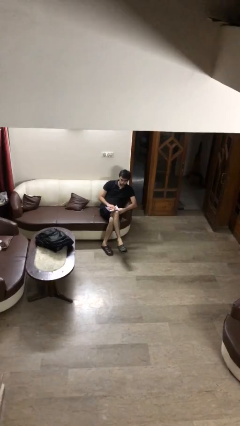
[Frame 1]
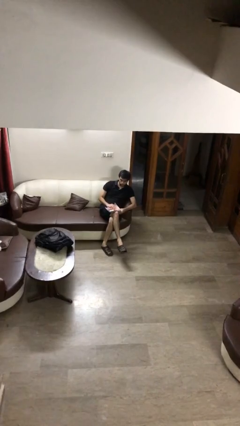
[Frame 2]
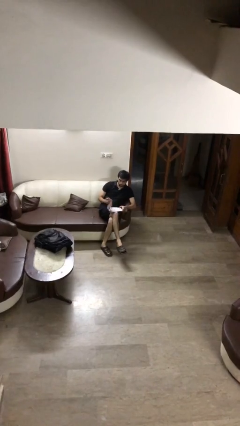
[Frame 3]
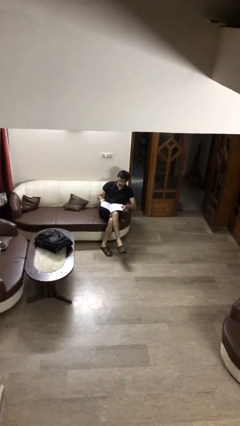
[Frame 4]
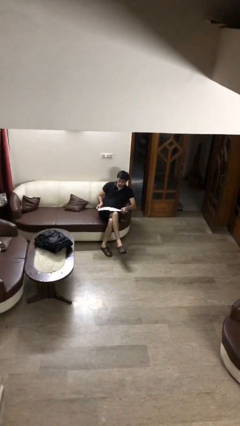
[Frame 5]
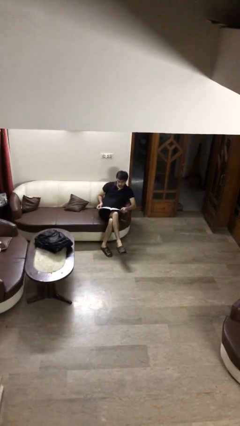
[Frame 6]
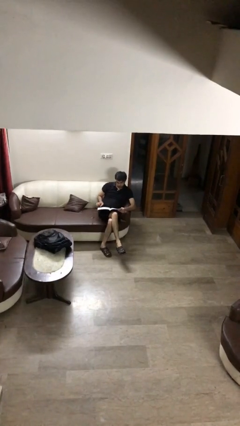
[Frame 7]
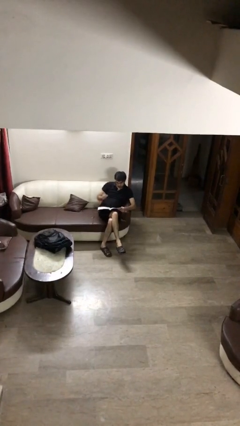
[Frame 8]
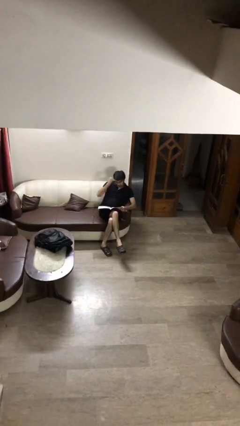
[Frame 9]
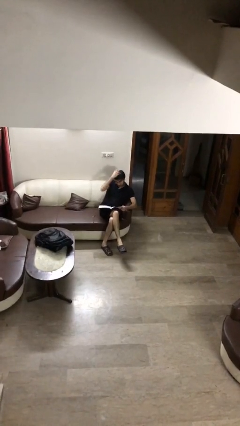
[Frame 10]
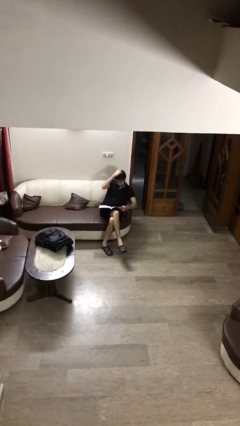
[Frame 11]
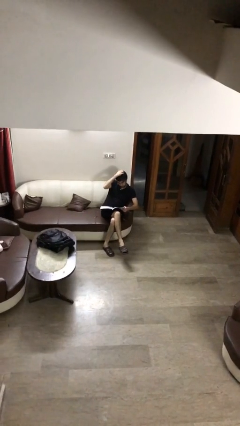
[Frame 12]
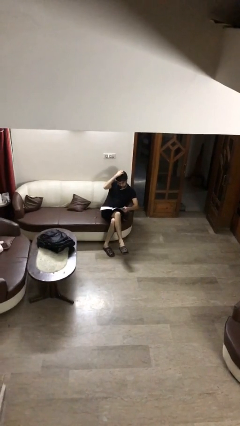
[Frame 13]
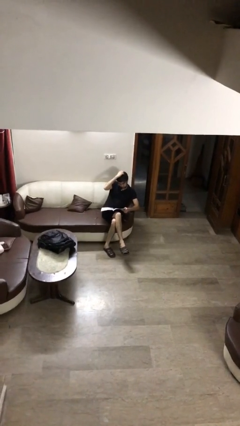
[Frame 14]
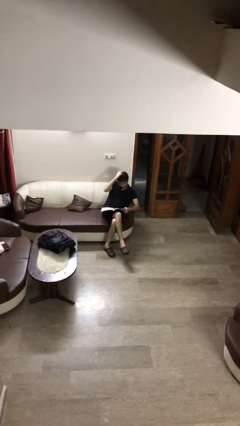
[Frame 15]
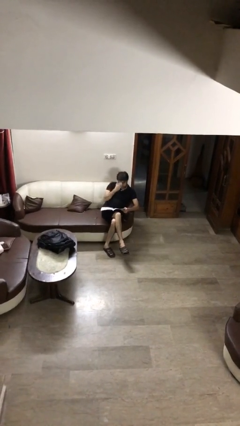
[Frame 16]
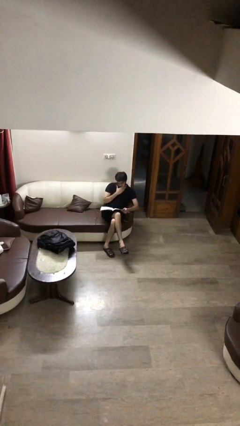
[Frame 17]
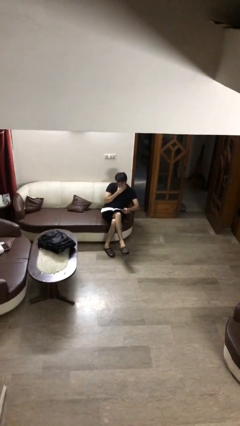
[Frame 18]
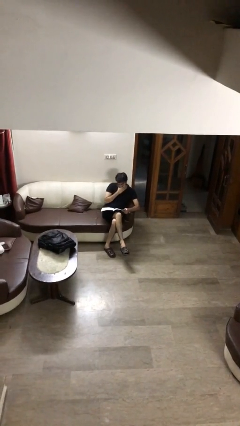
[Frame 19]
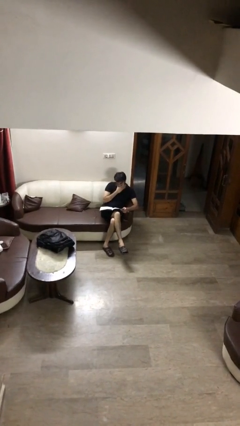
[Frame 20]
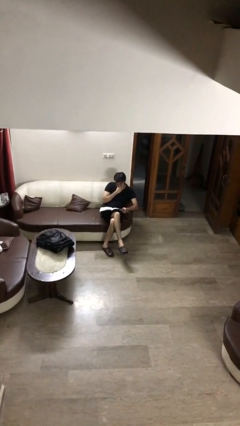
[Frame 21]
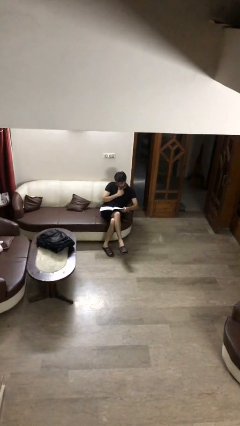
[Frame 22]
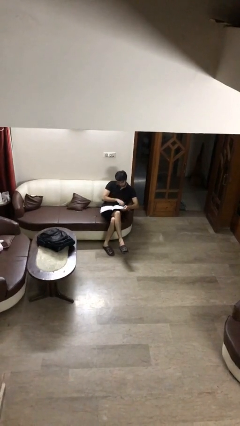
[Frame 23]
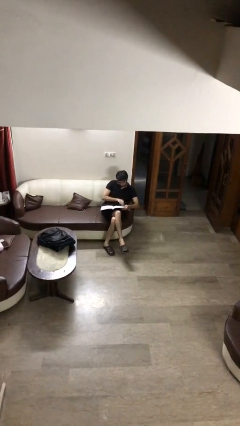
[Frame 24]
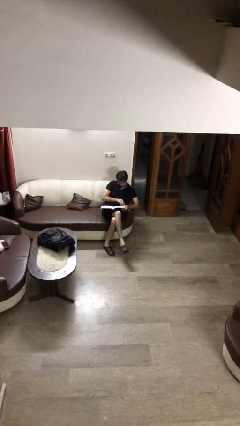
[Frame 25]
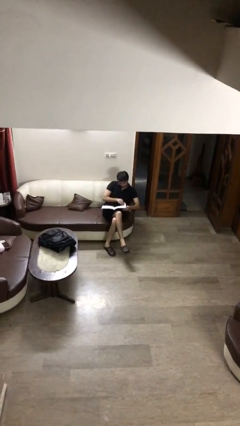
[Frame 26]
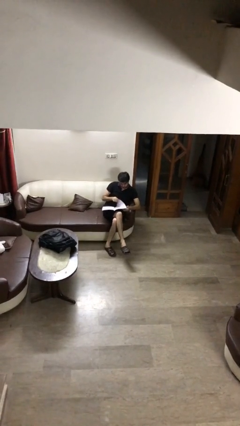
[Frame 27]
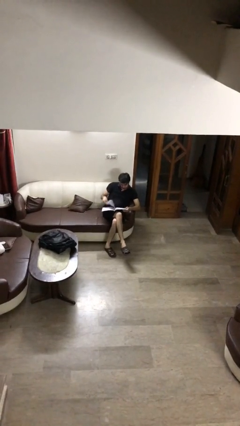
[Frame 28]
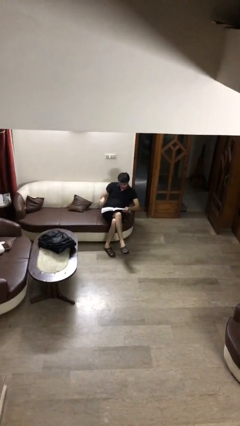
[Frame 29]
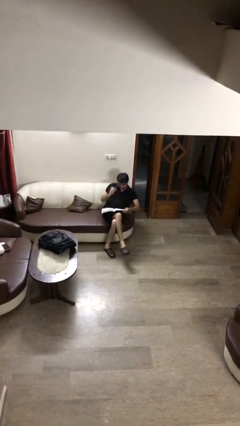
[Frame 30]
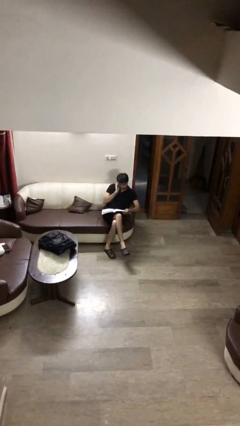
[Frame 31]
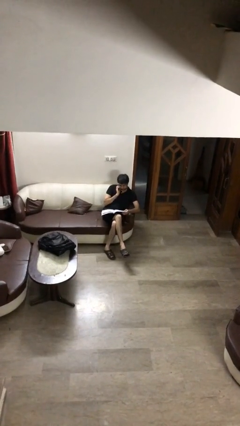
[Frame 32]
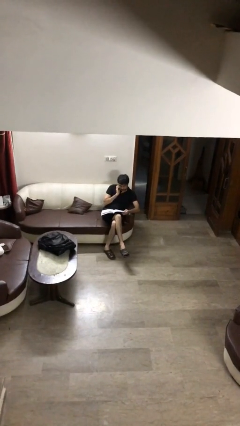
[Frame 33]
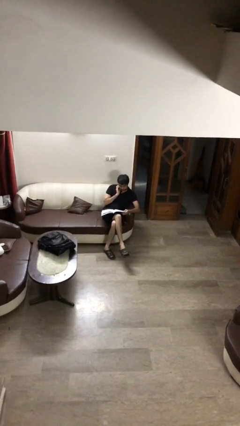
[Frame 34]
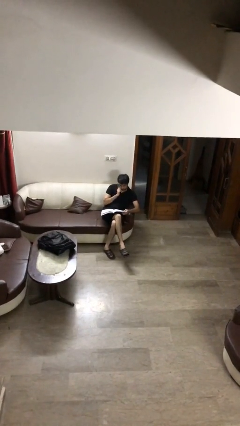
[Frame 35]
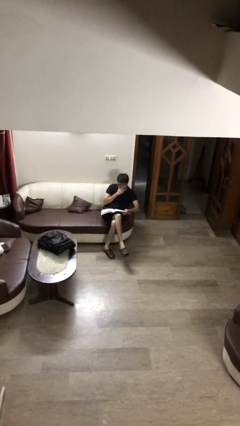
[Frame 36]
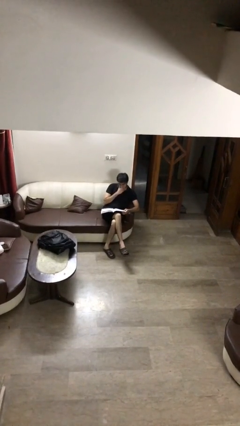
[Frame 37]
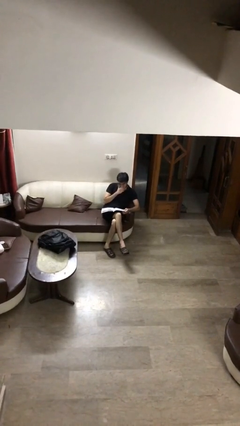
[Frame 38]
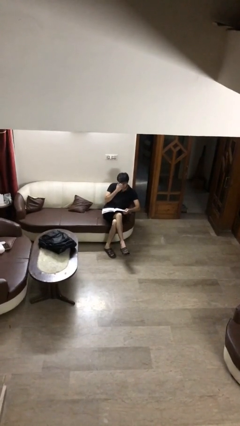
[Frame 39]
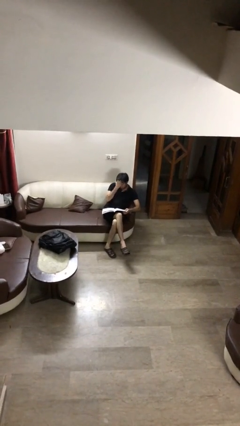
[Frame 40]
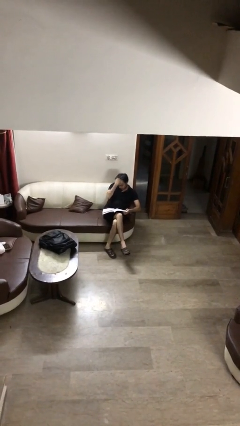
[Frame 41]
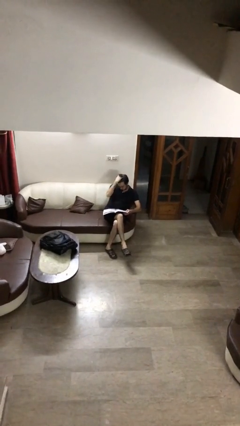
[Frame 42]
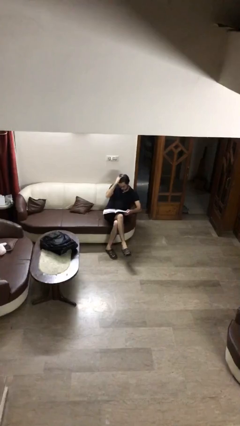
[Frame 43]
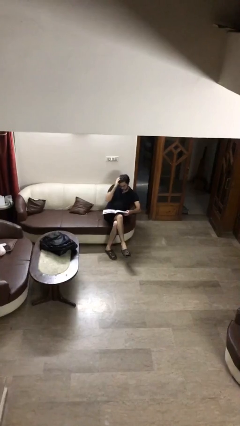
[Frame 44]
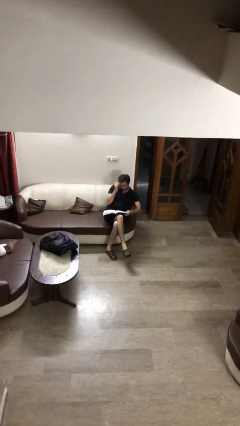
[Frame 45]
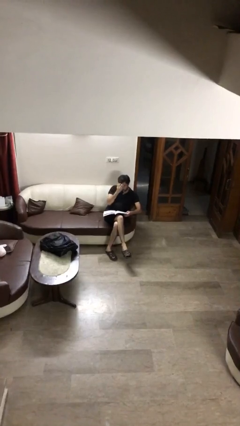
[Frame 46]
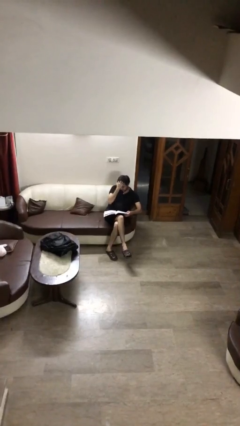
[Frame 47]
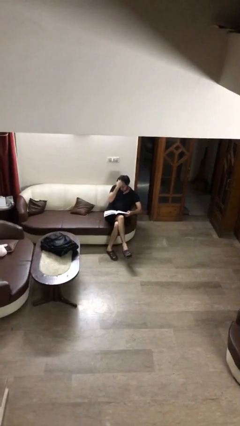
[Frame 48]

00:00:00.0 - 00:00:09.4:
person reads document

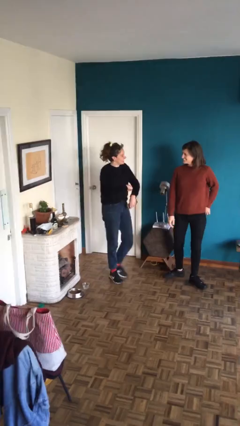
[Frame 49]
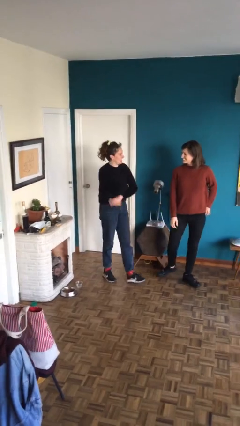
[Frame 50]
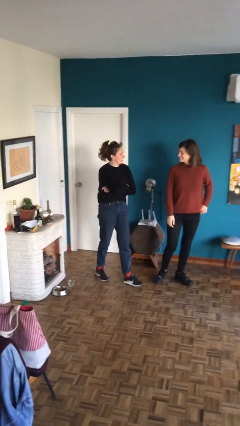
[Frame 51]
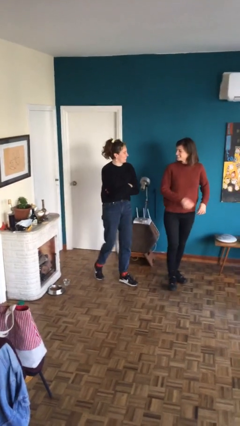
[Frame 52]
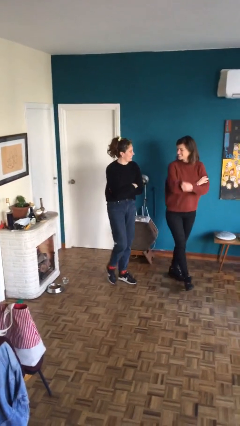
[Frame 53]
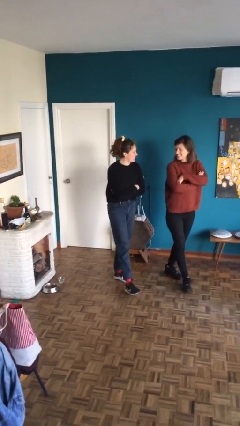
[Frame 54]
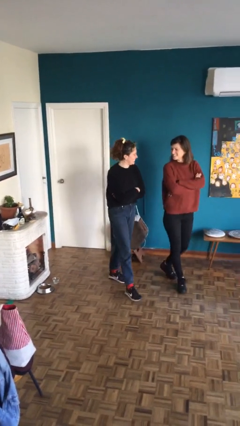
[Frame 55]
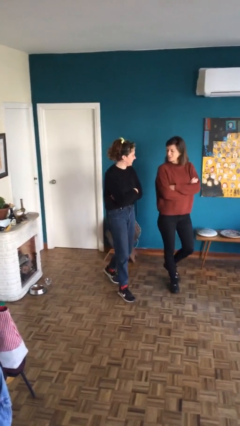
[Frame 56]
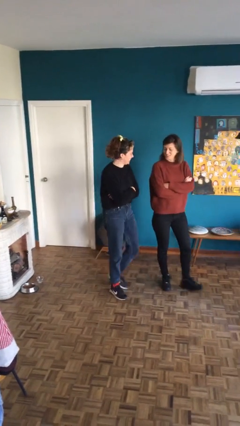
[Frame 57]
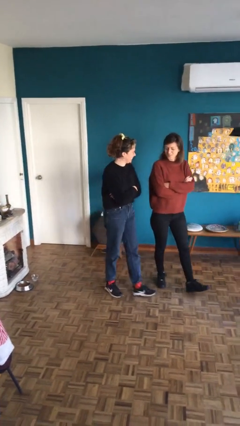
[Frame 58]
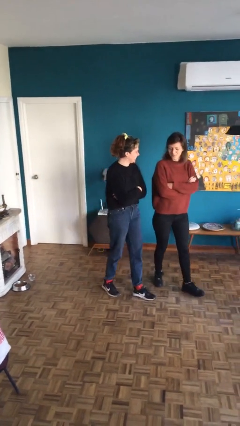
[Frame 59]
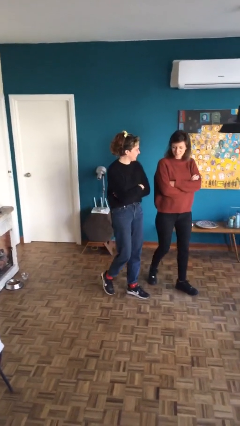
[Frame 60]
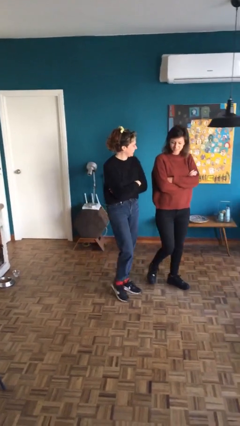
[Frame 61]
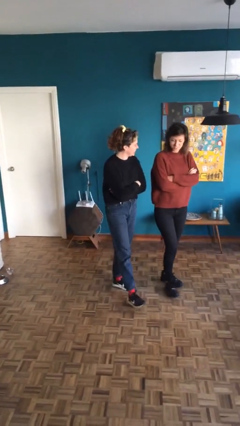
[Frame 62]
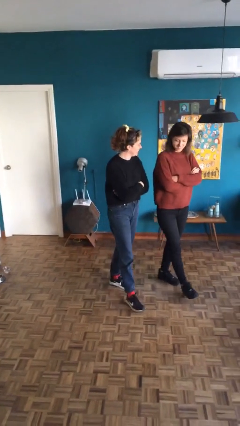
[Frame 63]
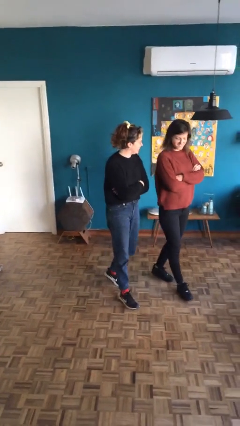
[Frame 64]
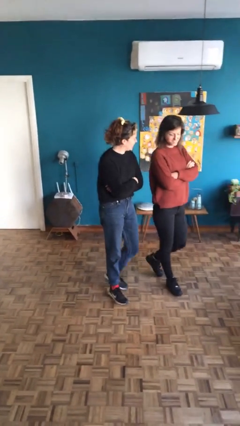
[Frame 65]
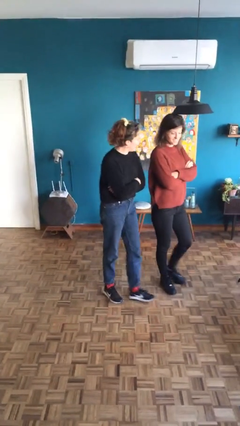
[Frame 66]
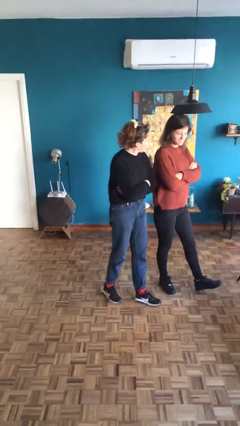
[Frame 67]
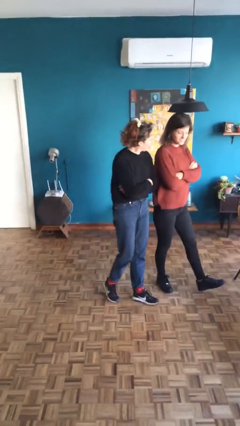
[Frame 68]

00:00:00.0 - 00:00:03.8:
person talks to person

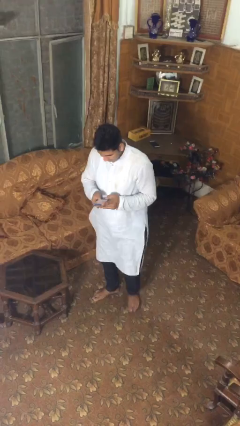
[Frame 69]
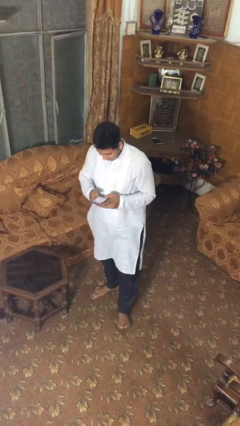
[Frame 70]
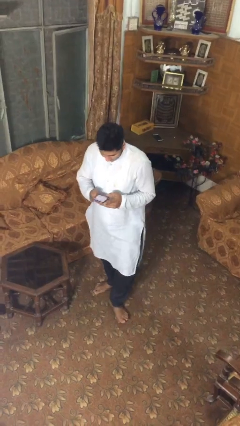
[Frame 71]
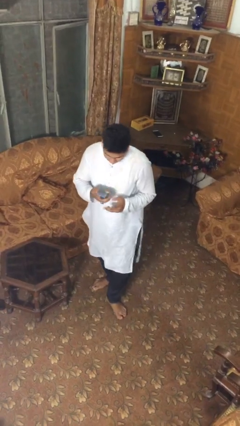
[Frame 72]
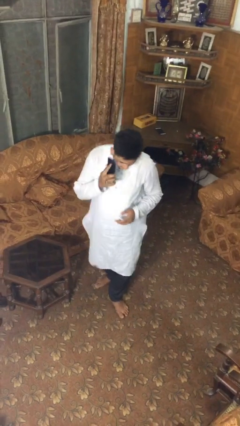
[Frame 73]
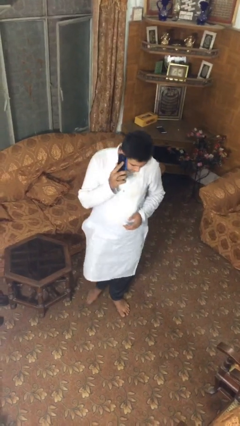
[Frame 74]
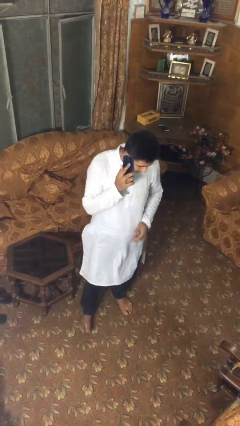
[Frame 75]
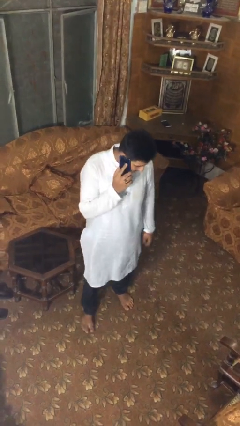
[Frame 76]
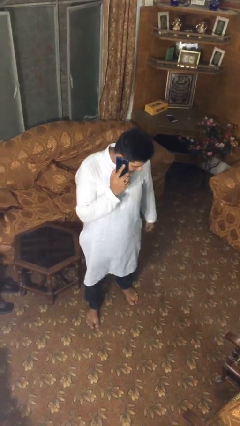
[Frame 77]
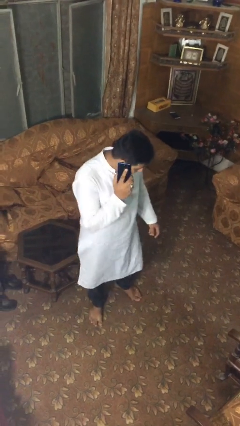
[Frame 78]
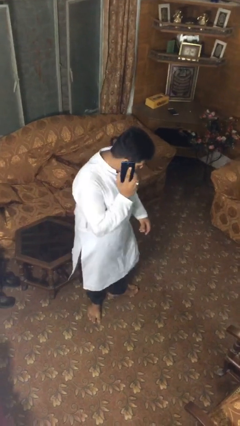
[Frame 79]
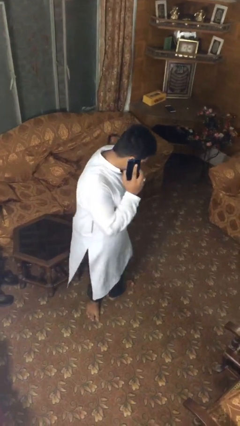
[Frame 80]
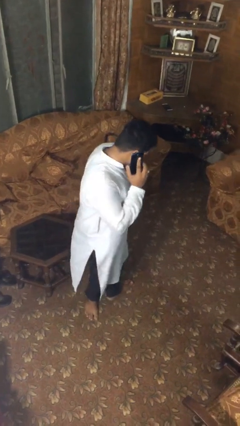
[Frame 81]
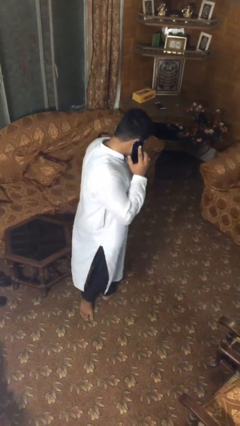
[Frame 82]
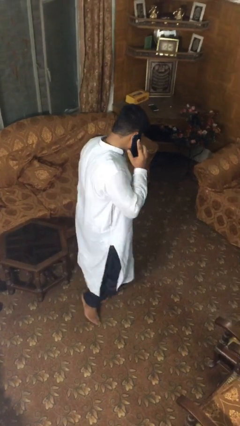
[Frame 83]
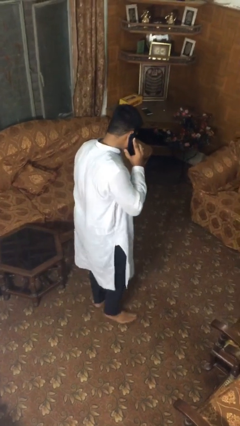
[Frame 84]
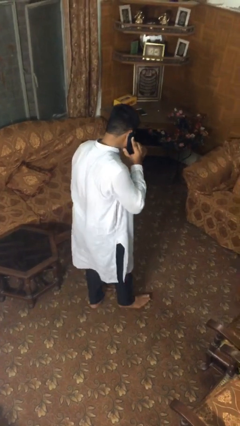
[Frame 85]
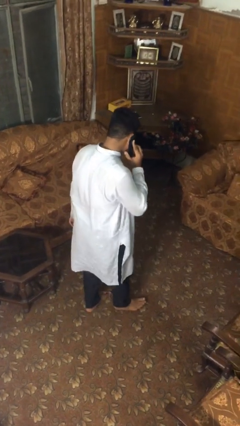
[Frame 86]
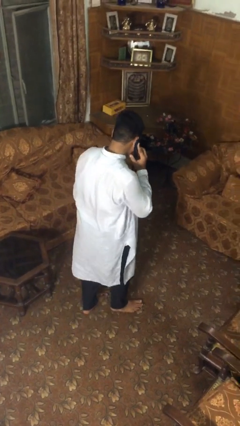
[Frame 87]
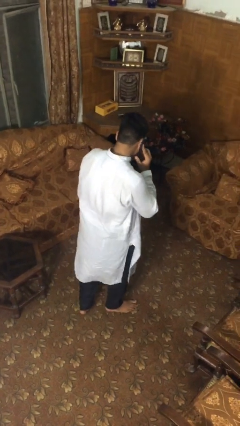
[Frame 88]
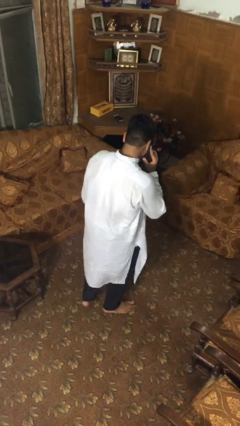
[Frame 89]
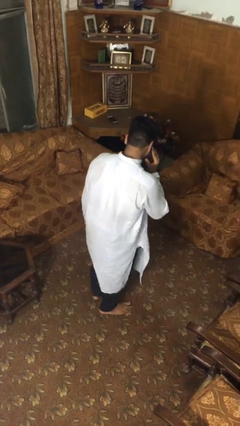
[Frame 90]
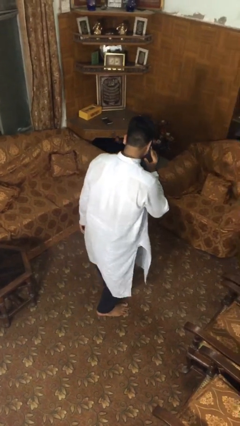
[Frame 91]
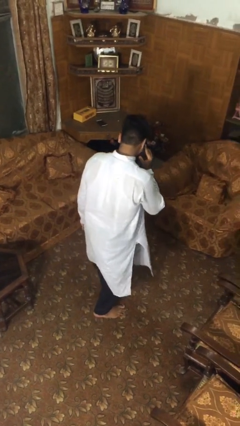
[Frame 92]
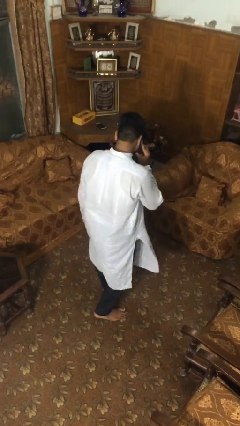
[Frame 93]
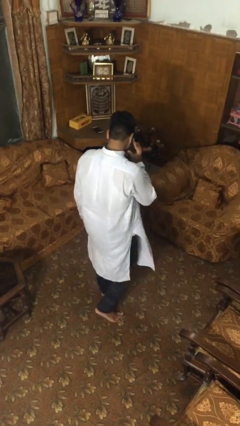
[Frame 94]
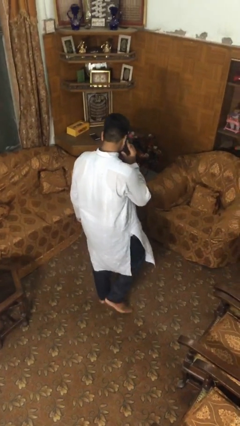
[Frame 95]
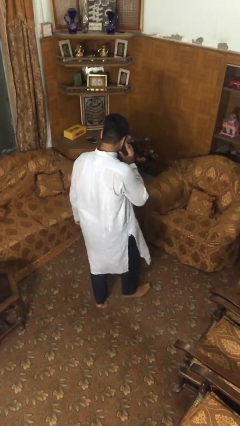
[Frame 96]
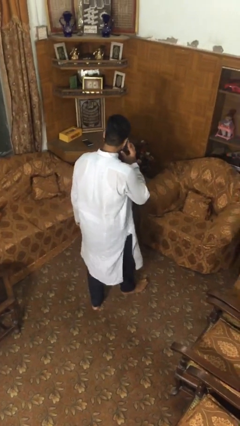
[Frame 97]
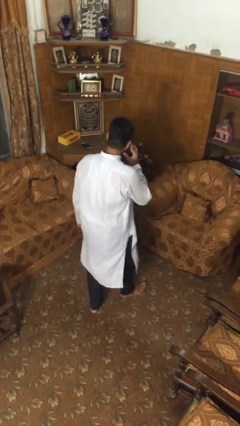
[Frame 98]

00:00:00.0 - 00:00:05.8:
person talks on phone
